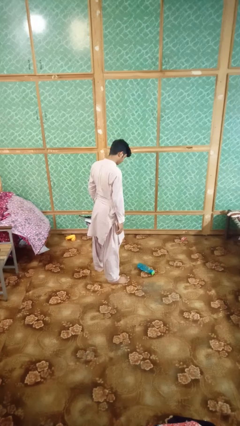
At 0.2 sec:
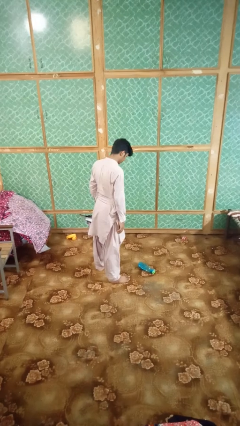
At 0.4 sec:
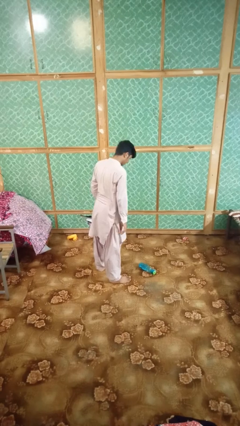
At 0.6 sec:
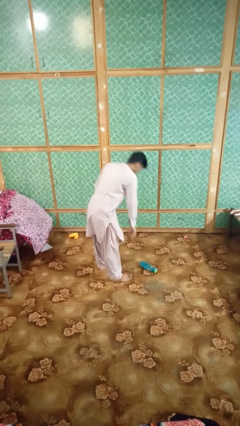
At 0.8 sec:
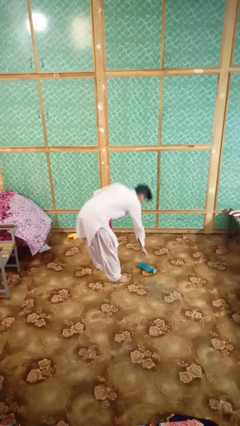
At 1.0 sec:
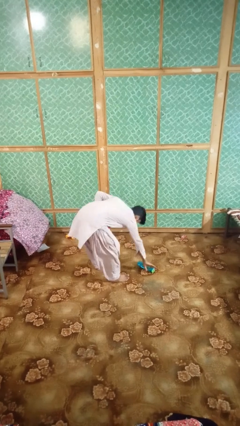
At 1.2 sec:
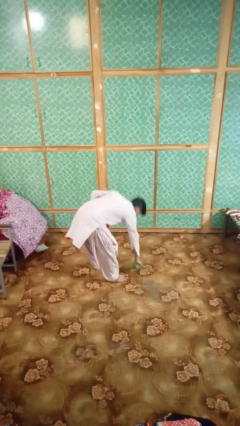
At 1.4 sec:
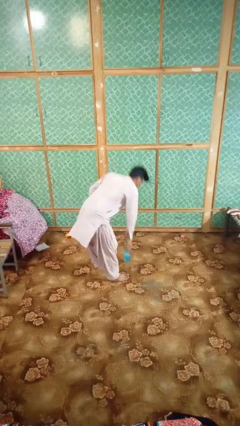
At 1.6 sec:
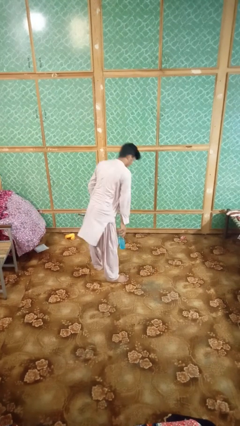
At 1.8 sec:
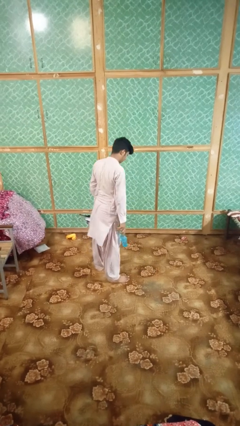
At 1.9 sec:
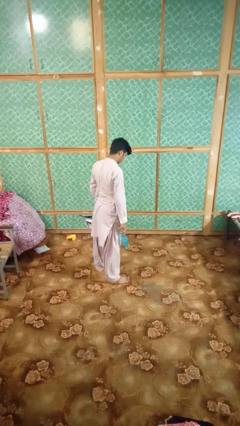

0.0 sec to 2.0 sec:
person picks up object from floor

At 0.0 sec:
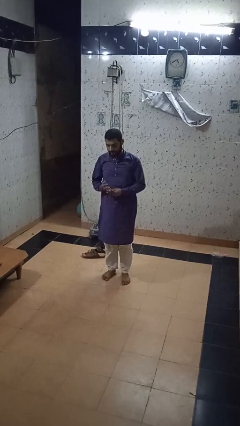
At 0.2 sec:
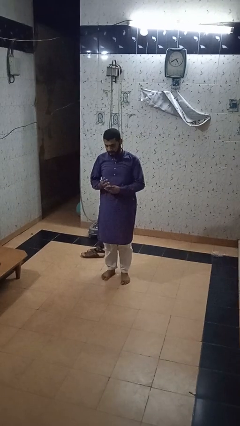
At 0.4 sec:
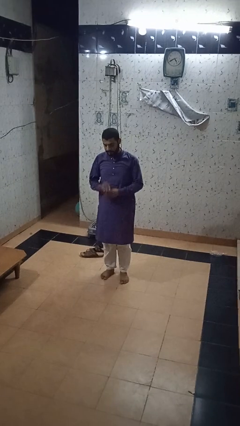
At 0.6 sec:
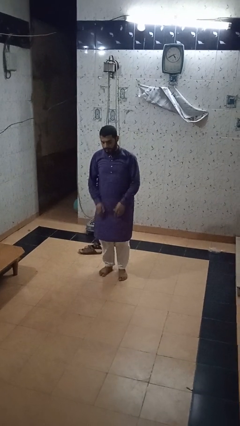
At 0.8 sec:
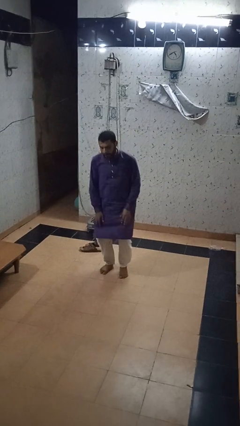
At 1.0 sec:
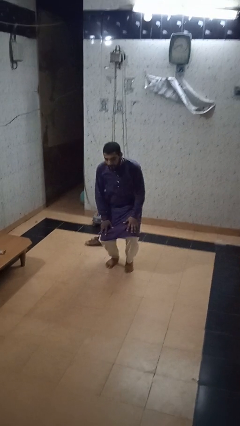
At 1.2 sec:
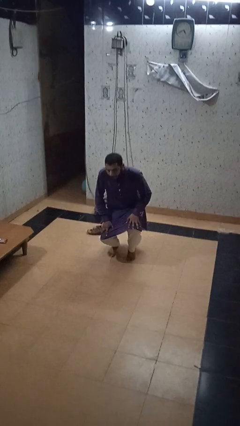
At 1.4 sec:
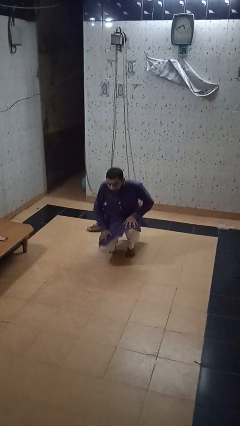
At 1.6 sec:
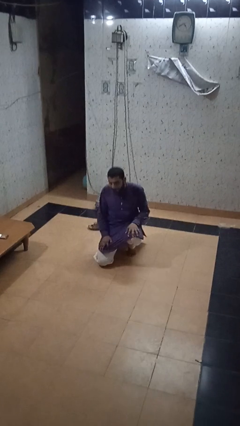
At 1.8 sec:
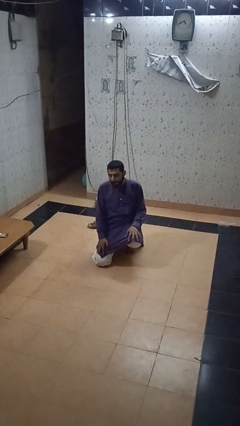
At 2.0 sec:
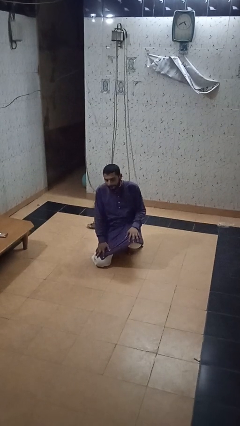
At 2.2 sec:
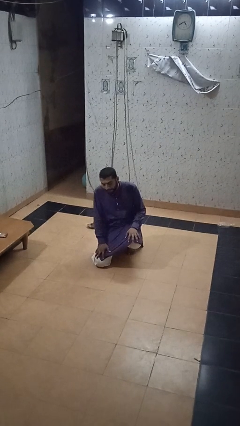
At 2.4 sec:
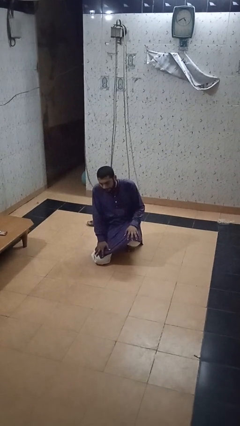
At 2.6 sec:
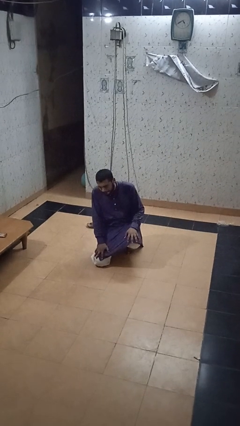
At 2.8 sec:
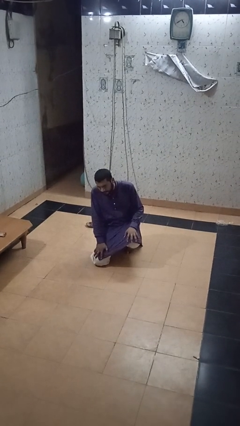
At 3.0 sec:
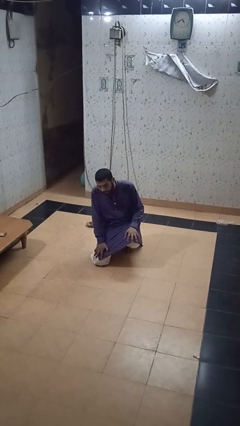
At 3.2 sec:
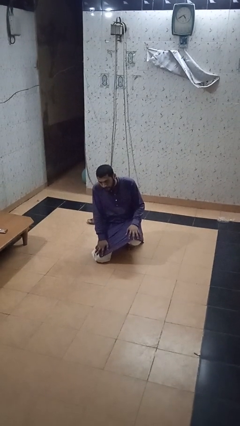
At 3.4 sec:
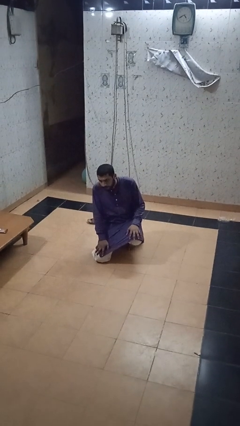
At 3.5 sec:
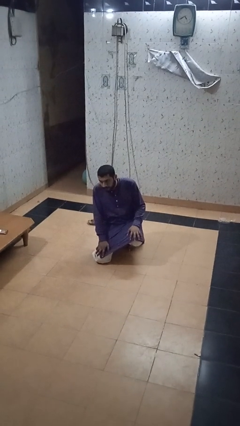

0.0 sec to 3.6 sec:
person kneels

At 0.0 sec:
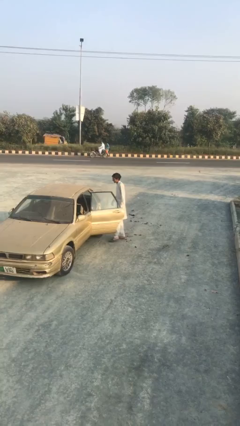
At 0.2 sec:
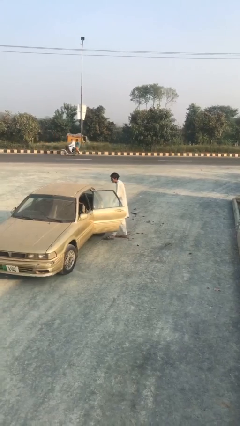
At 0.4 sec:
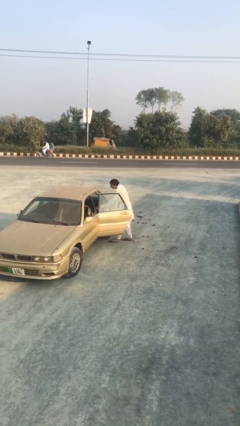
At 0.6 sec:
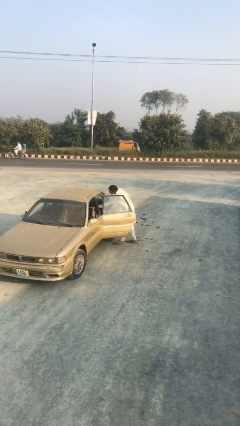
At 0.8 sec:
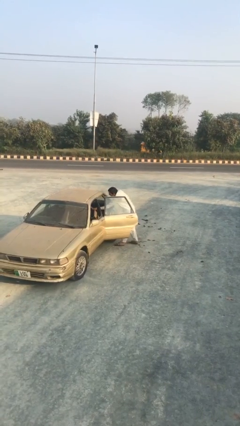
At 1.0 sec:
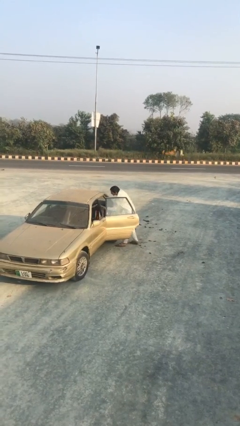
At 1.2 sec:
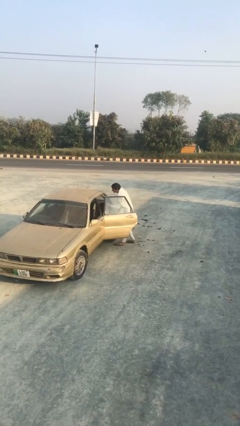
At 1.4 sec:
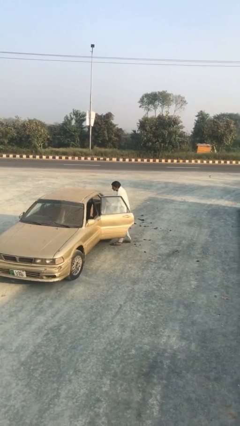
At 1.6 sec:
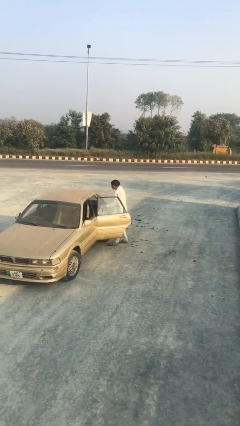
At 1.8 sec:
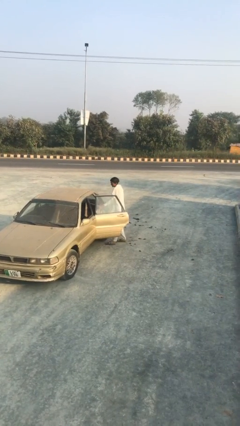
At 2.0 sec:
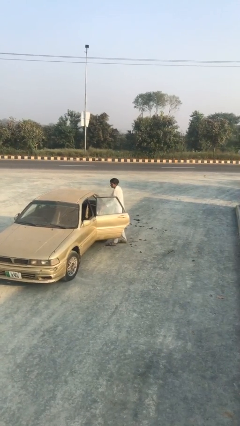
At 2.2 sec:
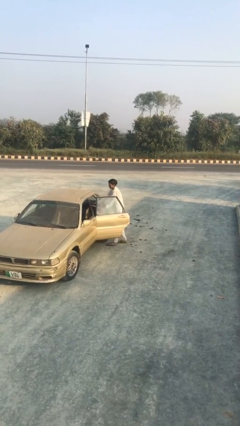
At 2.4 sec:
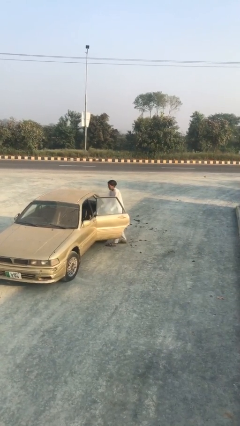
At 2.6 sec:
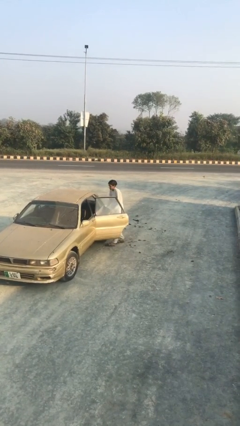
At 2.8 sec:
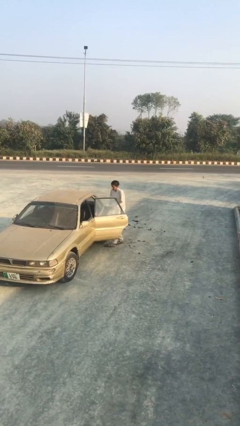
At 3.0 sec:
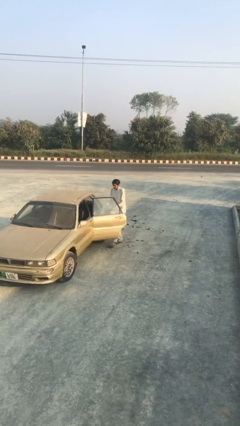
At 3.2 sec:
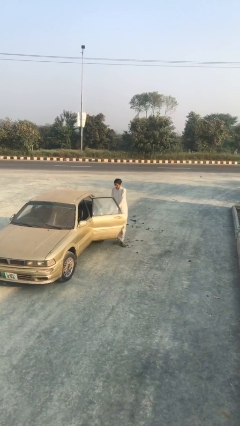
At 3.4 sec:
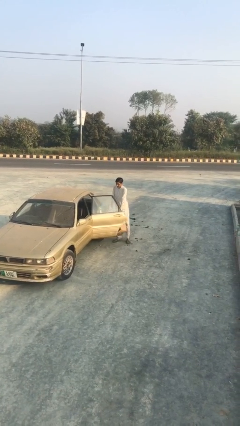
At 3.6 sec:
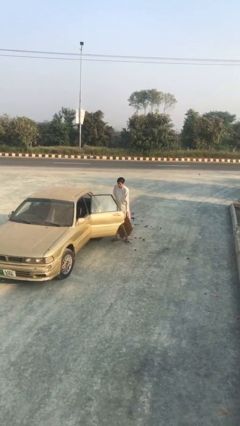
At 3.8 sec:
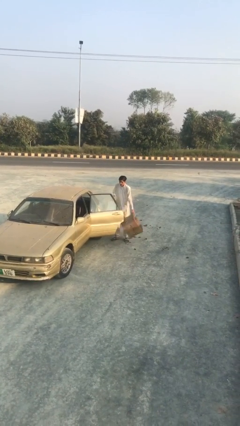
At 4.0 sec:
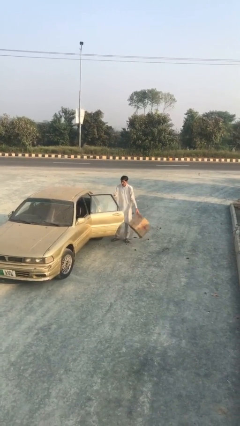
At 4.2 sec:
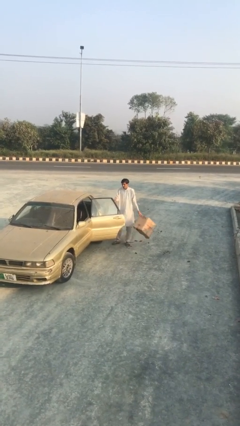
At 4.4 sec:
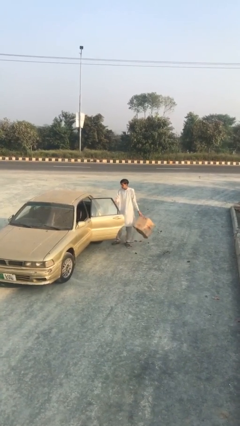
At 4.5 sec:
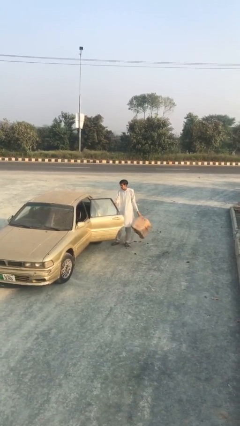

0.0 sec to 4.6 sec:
person unloads car

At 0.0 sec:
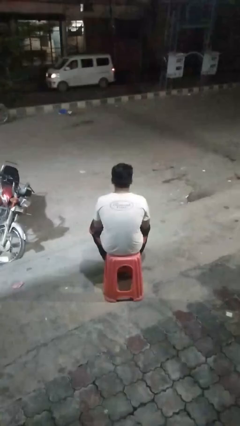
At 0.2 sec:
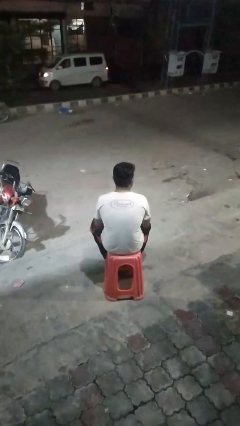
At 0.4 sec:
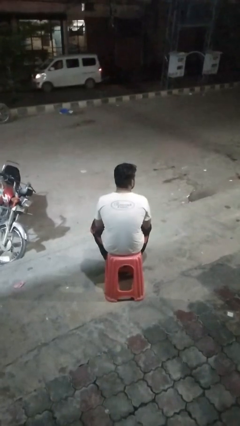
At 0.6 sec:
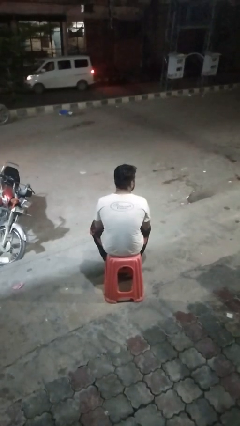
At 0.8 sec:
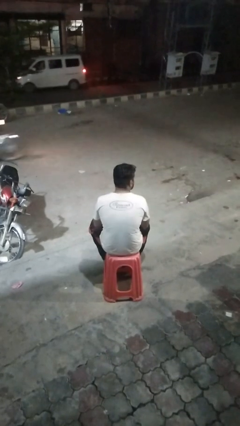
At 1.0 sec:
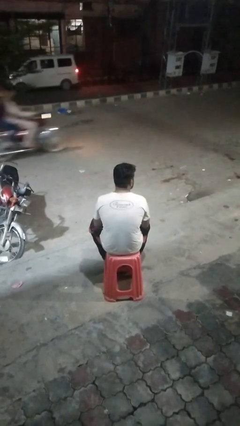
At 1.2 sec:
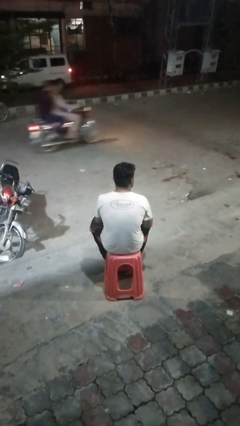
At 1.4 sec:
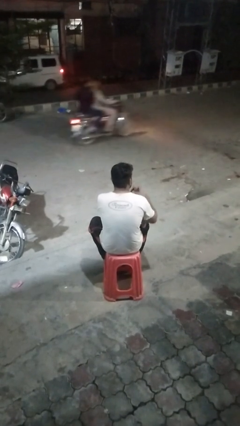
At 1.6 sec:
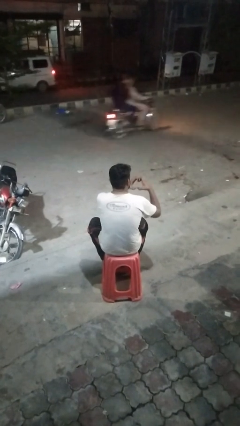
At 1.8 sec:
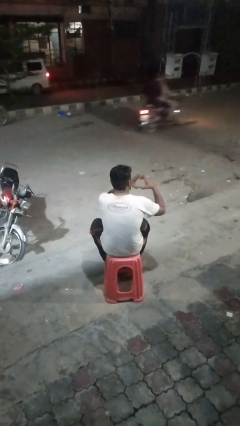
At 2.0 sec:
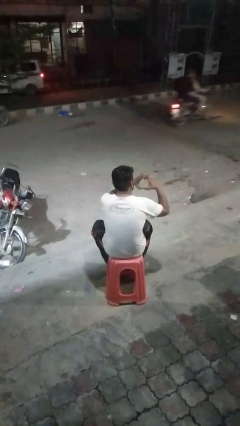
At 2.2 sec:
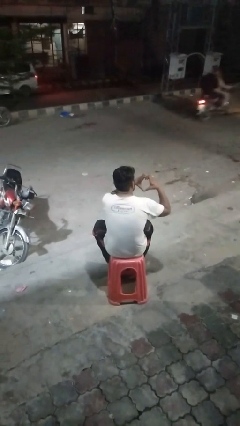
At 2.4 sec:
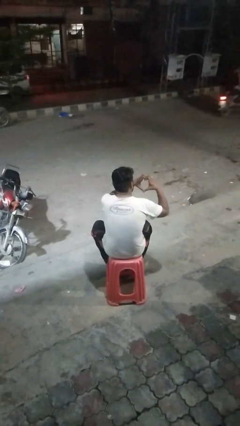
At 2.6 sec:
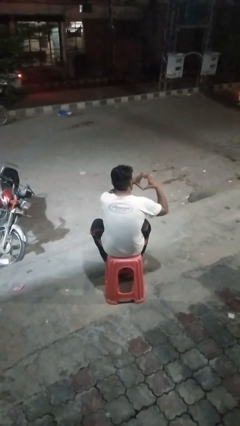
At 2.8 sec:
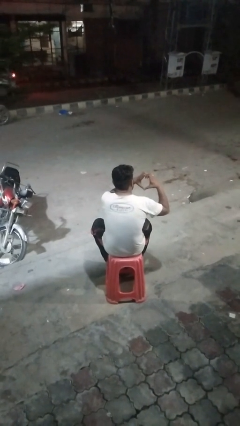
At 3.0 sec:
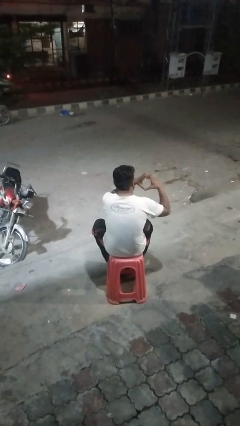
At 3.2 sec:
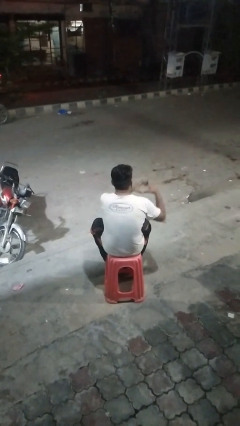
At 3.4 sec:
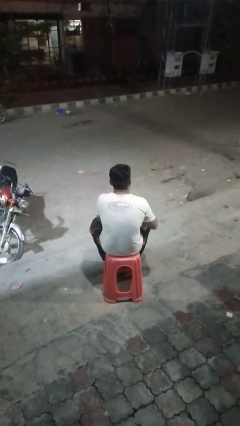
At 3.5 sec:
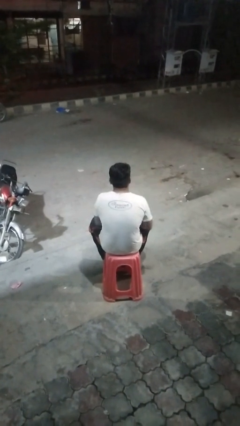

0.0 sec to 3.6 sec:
person gestures heart

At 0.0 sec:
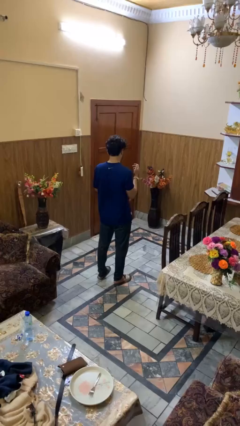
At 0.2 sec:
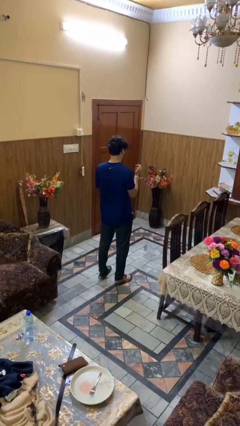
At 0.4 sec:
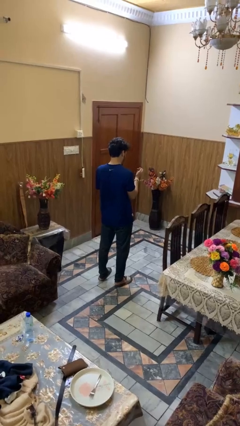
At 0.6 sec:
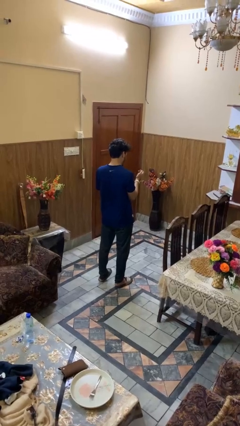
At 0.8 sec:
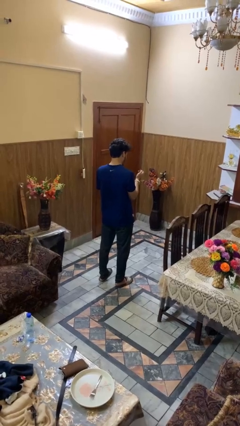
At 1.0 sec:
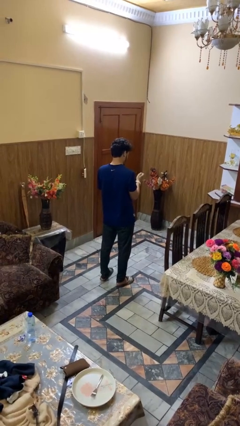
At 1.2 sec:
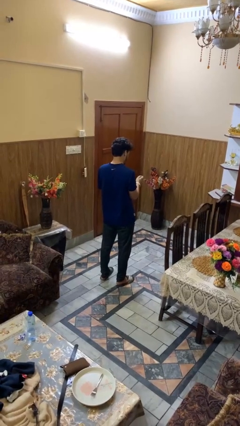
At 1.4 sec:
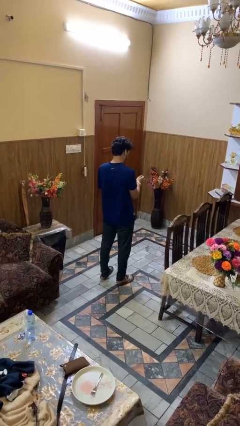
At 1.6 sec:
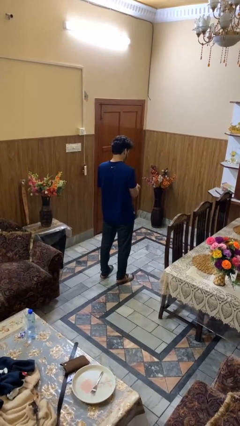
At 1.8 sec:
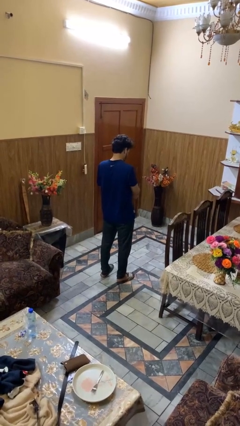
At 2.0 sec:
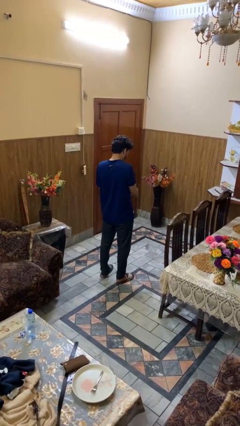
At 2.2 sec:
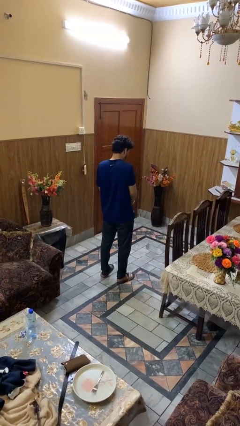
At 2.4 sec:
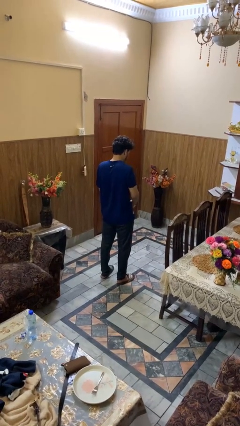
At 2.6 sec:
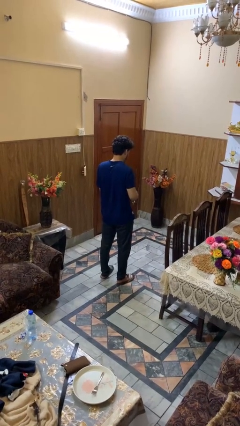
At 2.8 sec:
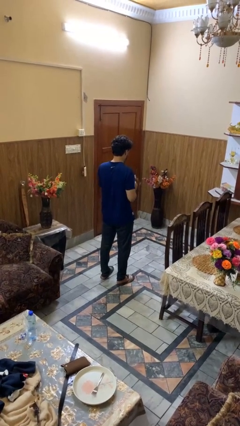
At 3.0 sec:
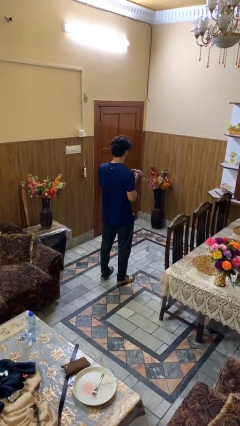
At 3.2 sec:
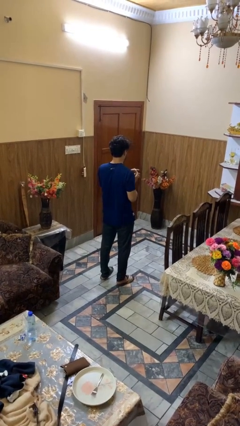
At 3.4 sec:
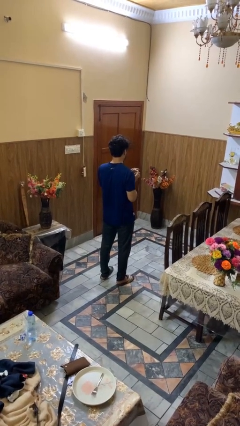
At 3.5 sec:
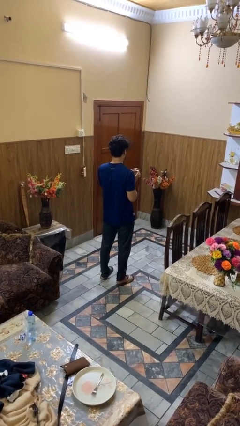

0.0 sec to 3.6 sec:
person takes off wristwatch
